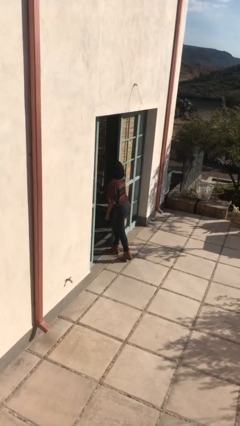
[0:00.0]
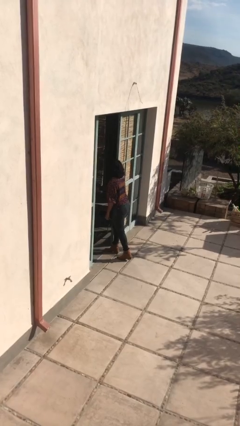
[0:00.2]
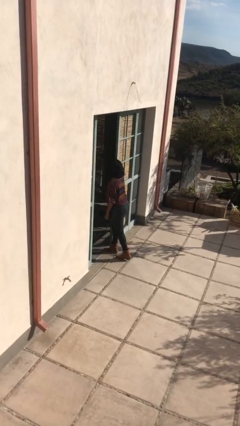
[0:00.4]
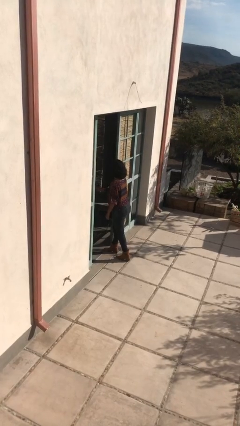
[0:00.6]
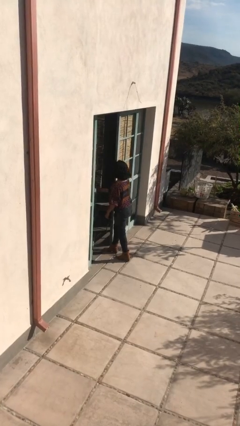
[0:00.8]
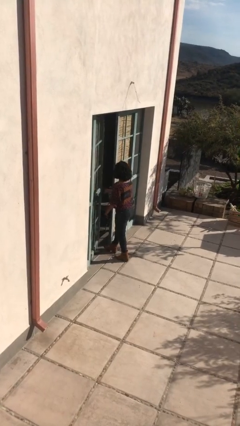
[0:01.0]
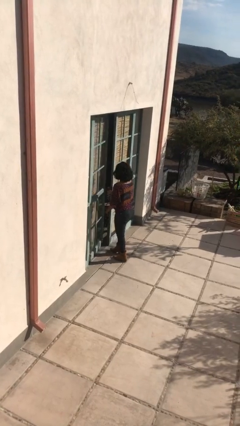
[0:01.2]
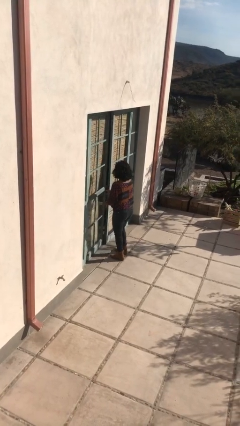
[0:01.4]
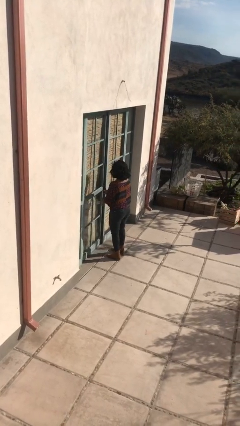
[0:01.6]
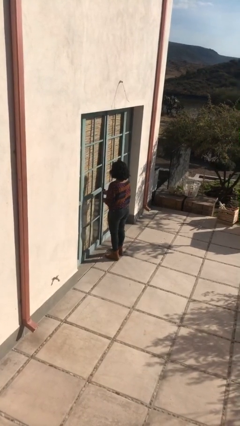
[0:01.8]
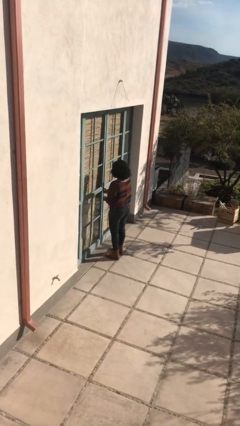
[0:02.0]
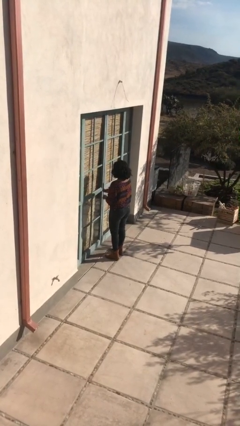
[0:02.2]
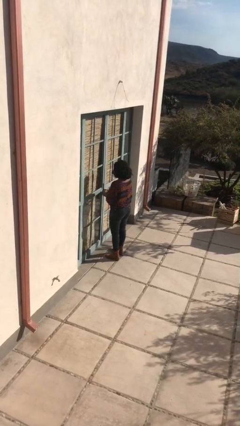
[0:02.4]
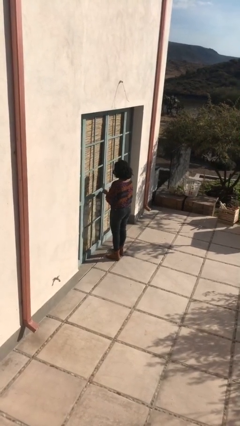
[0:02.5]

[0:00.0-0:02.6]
person closes facility door

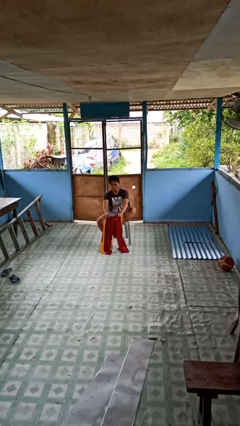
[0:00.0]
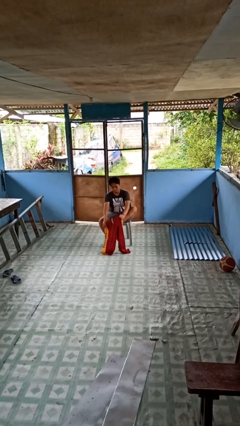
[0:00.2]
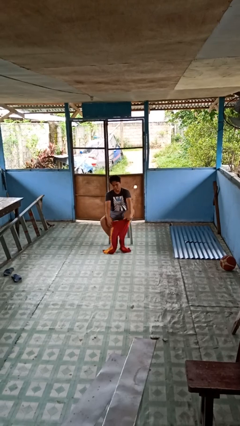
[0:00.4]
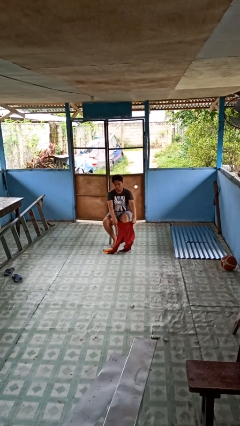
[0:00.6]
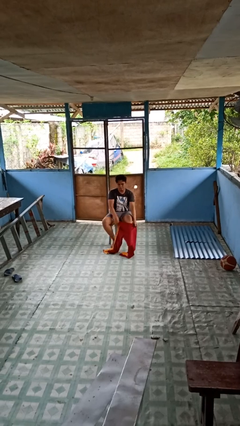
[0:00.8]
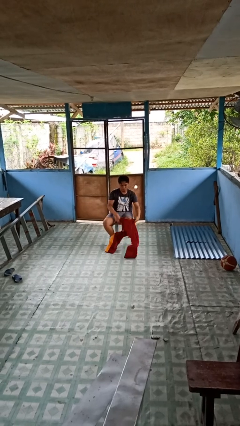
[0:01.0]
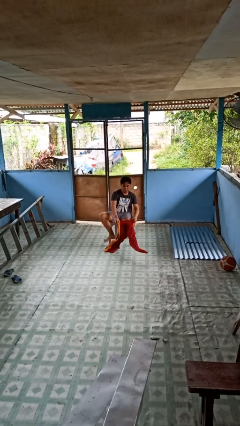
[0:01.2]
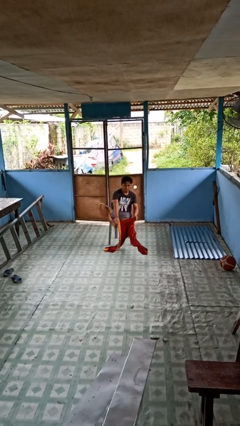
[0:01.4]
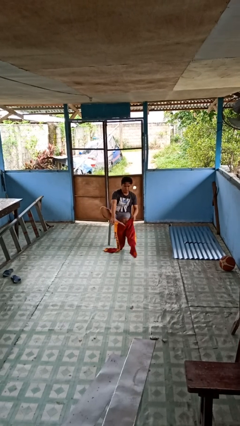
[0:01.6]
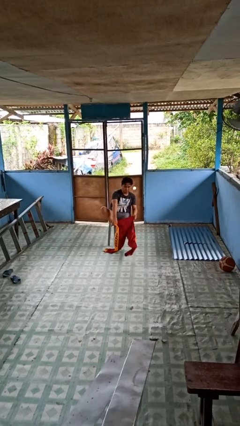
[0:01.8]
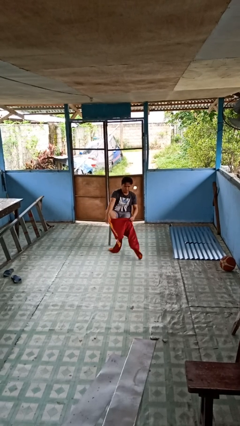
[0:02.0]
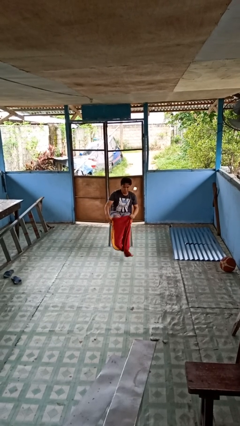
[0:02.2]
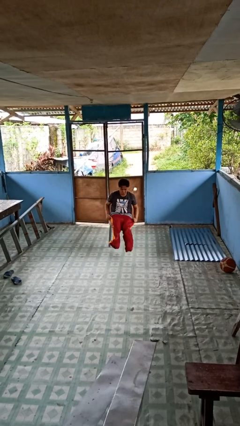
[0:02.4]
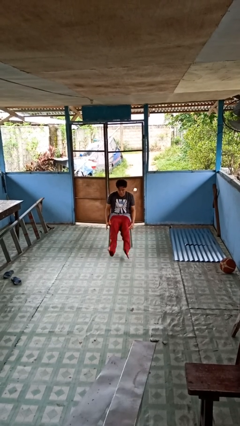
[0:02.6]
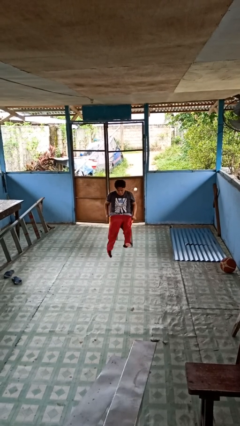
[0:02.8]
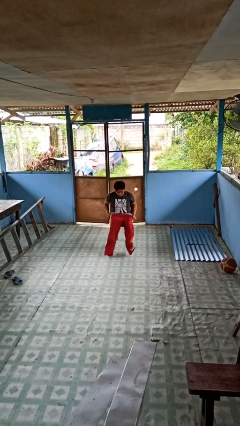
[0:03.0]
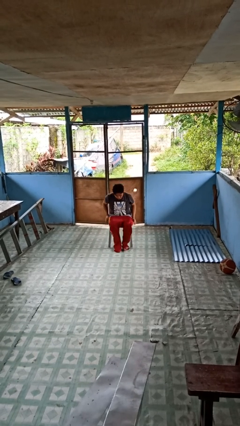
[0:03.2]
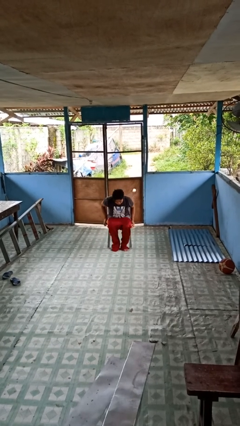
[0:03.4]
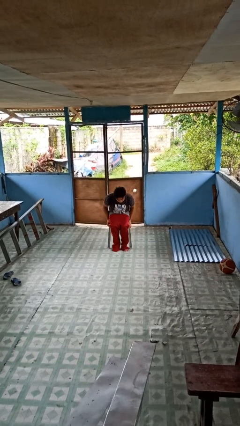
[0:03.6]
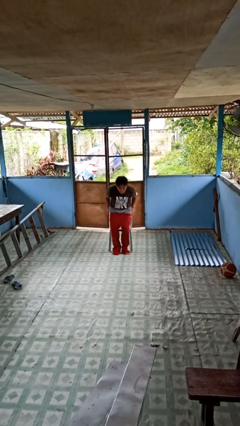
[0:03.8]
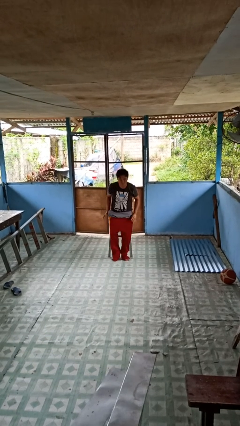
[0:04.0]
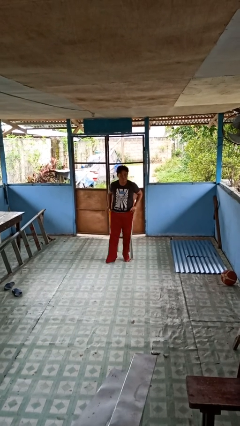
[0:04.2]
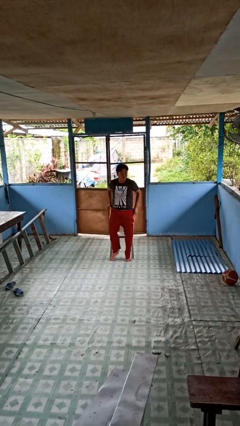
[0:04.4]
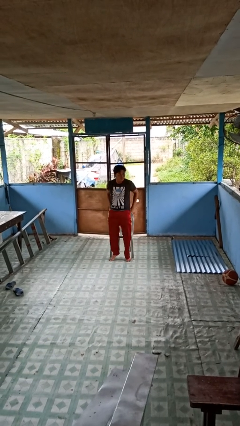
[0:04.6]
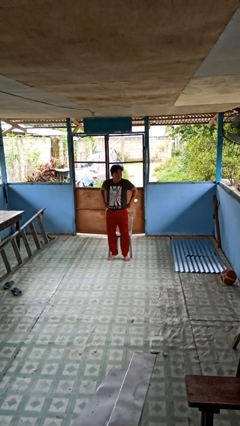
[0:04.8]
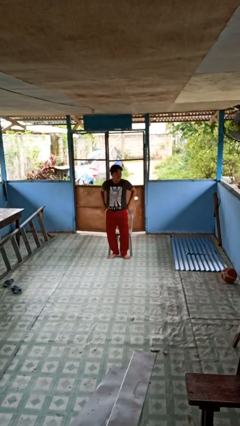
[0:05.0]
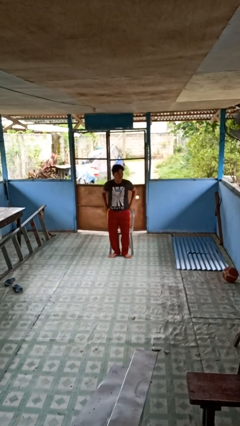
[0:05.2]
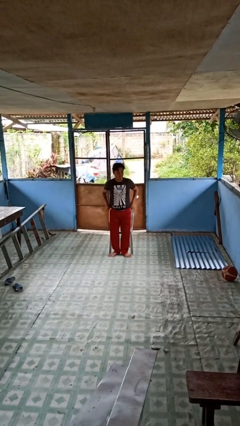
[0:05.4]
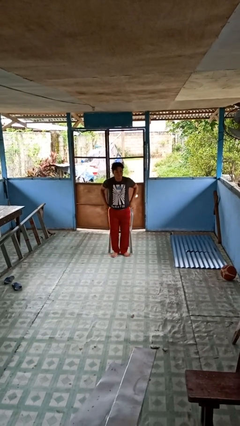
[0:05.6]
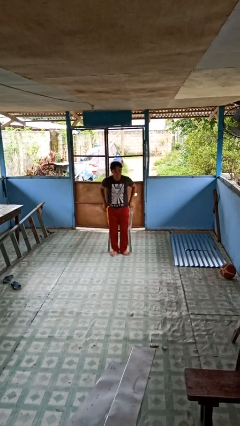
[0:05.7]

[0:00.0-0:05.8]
person puts on pants

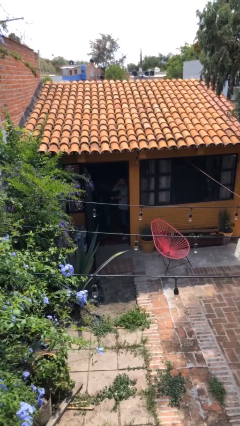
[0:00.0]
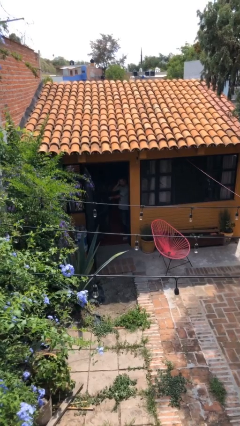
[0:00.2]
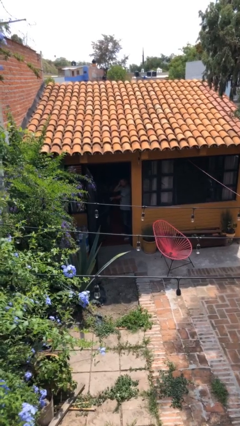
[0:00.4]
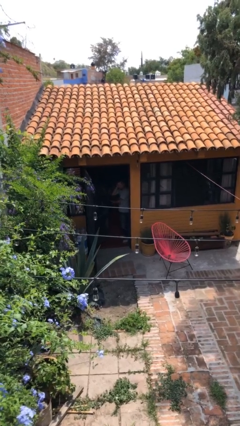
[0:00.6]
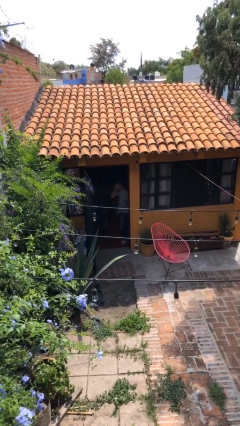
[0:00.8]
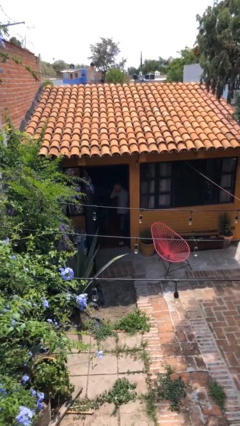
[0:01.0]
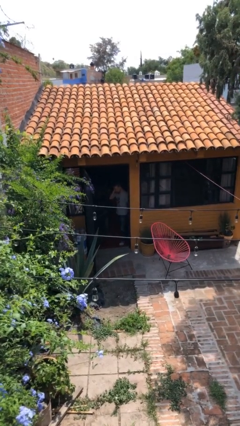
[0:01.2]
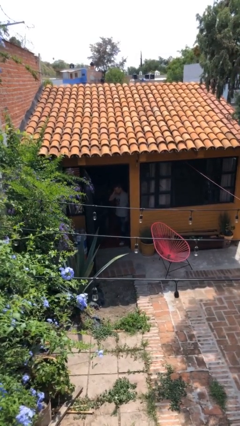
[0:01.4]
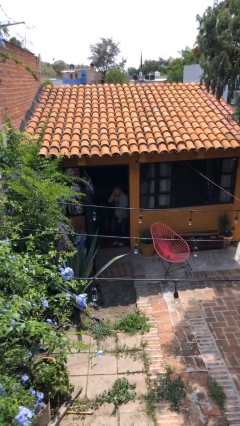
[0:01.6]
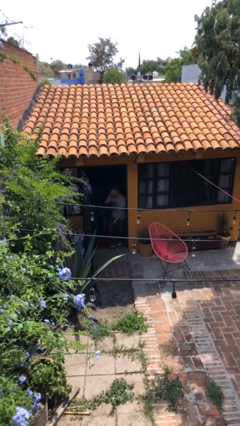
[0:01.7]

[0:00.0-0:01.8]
person enters scene through structure

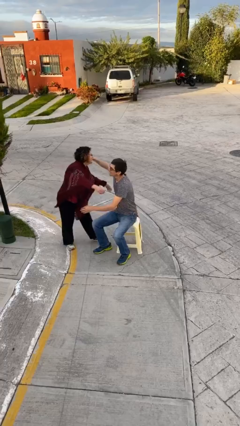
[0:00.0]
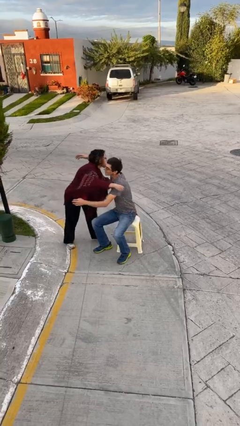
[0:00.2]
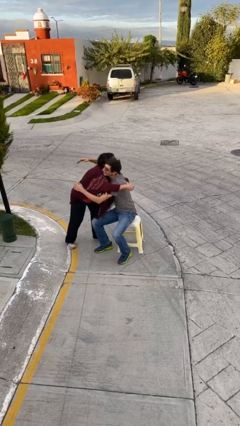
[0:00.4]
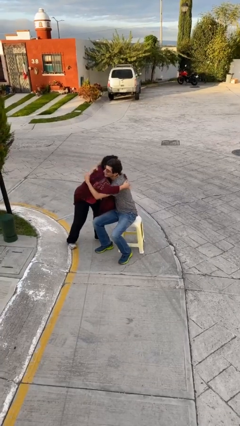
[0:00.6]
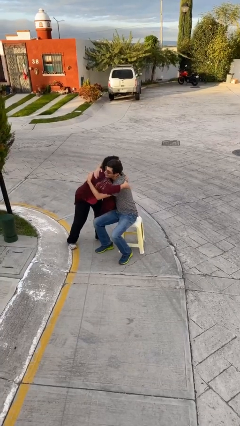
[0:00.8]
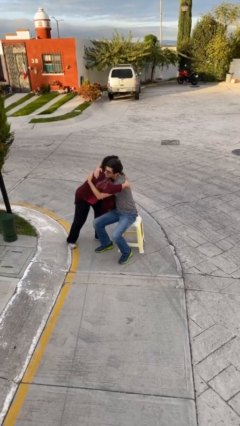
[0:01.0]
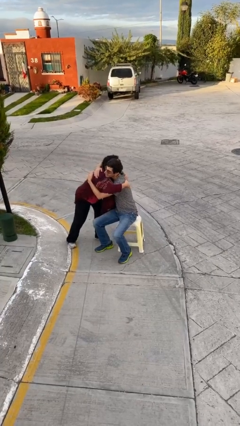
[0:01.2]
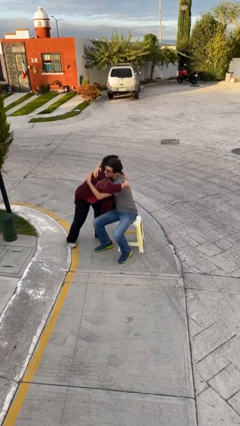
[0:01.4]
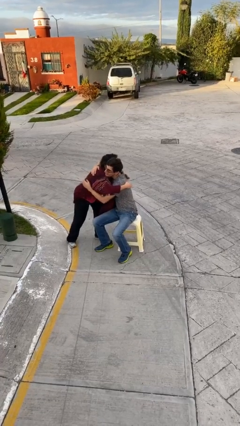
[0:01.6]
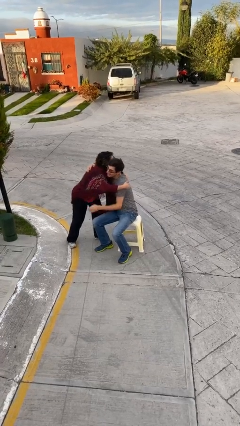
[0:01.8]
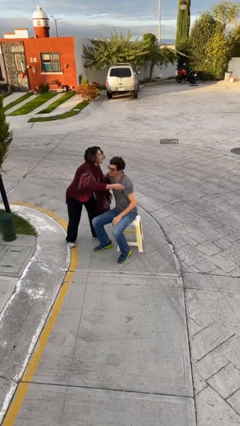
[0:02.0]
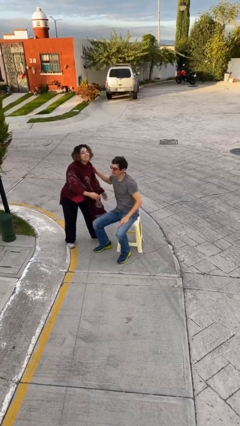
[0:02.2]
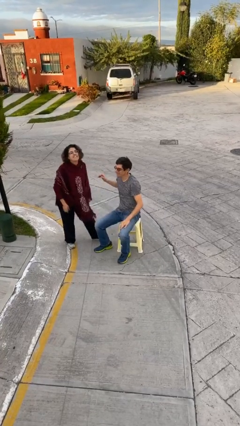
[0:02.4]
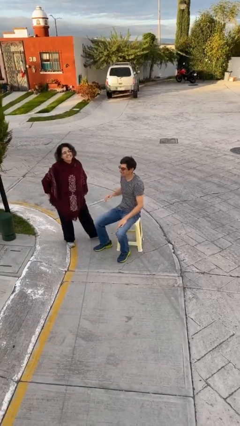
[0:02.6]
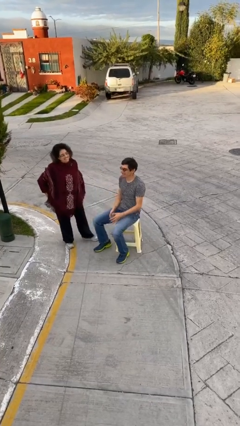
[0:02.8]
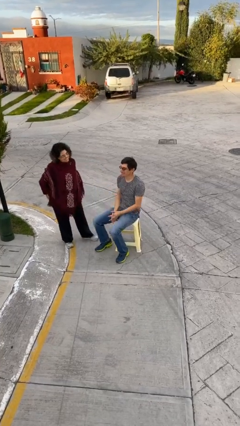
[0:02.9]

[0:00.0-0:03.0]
person embraces person

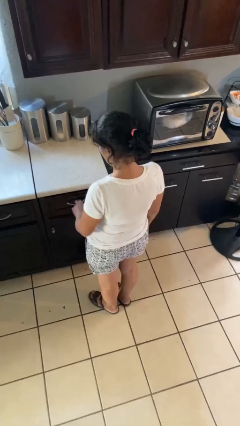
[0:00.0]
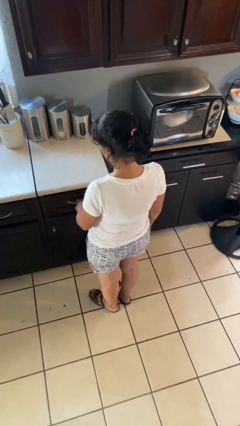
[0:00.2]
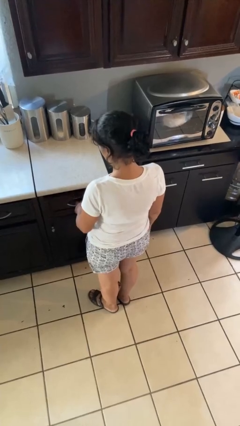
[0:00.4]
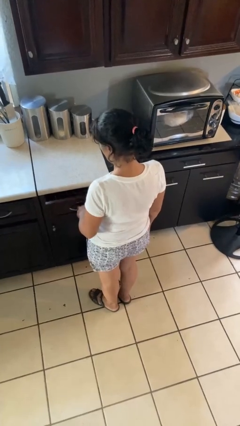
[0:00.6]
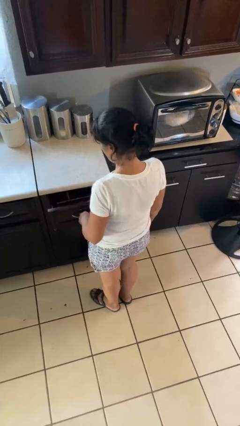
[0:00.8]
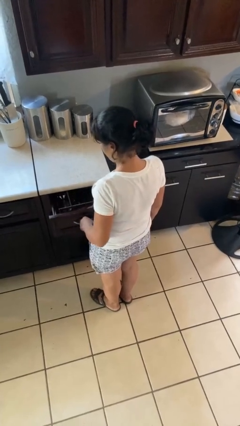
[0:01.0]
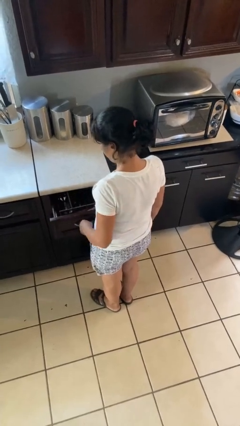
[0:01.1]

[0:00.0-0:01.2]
person opens kitchen drawer

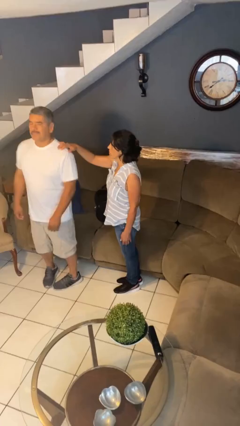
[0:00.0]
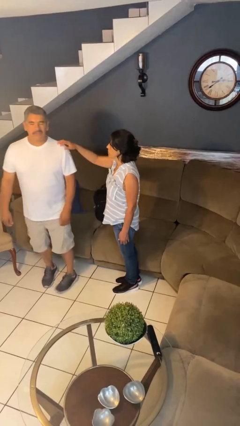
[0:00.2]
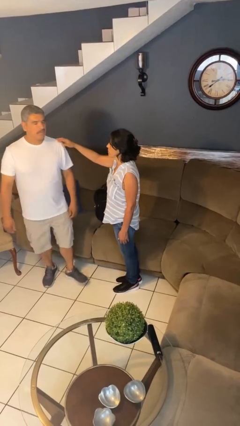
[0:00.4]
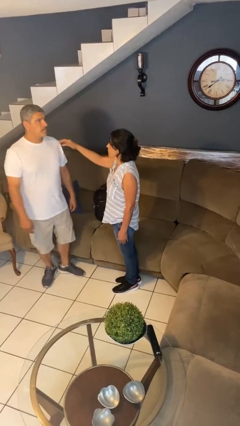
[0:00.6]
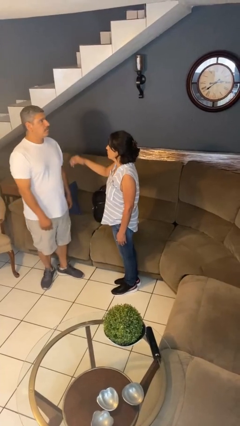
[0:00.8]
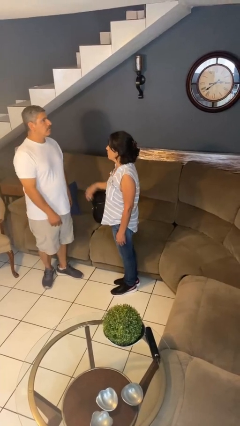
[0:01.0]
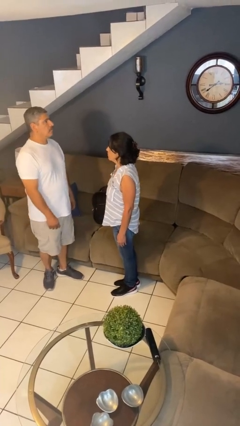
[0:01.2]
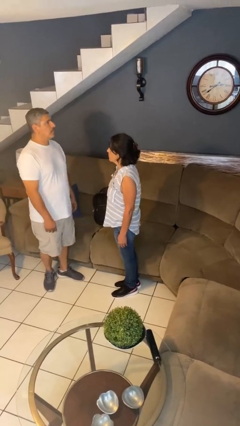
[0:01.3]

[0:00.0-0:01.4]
person spins person around

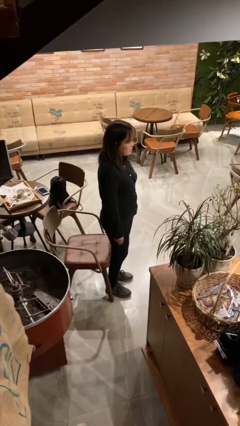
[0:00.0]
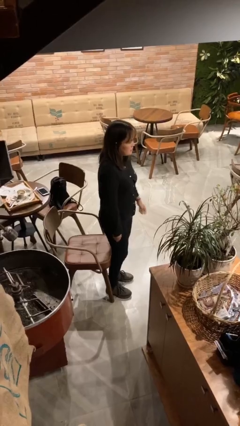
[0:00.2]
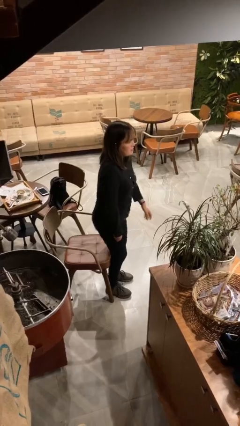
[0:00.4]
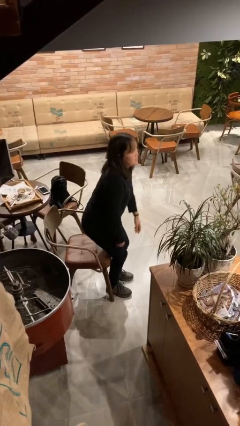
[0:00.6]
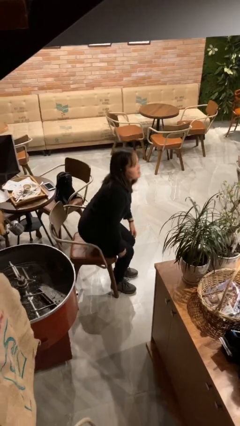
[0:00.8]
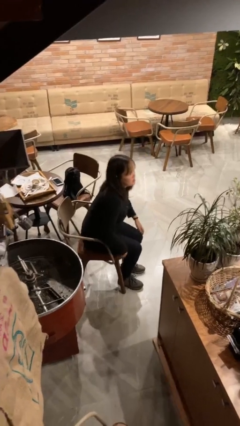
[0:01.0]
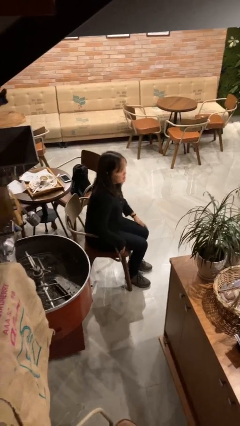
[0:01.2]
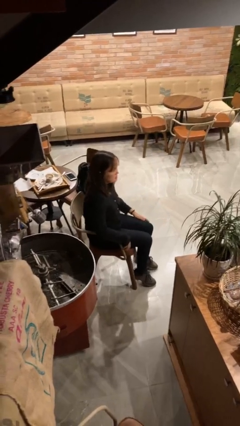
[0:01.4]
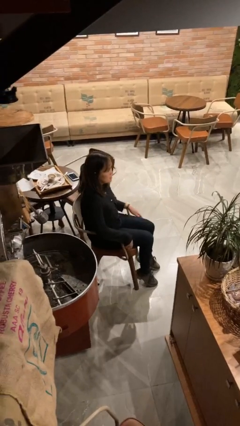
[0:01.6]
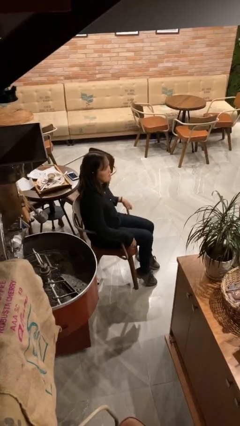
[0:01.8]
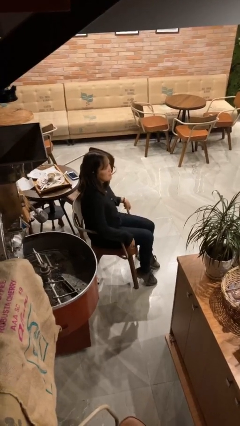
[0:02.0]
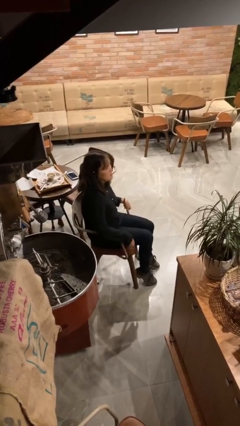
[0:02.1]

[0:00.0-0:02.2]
person sits down
